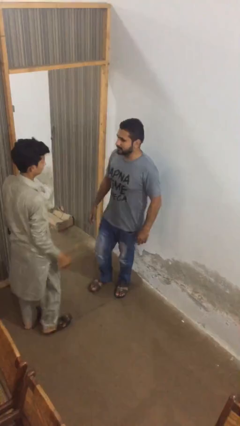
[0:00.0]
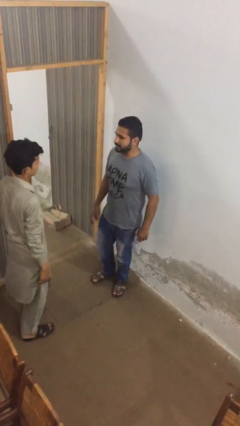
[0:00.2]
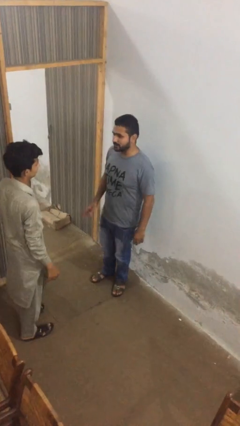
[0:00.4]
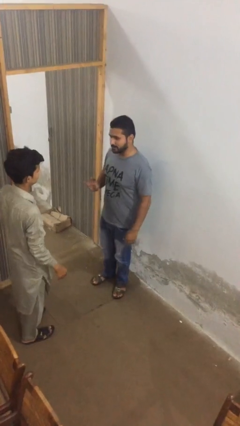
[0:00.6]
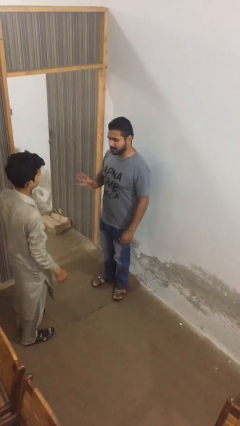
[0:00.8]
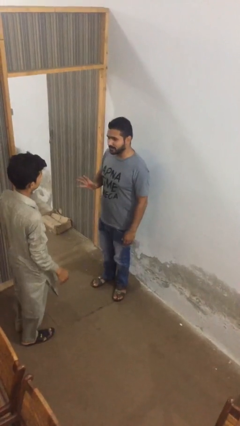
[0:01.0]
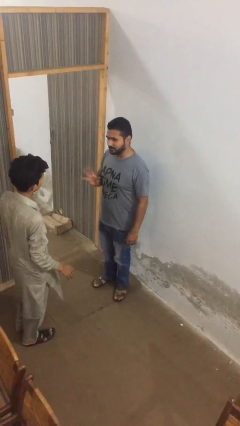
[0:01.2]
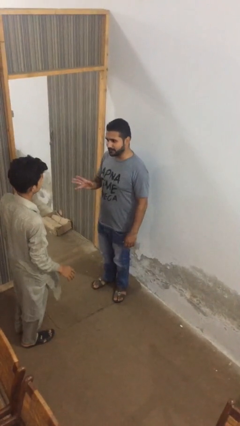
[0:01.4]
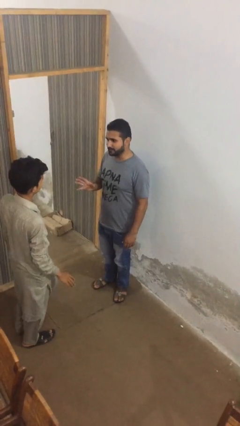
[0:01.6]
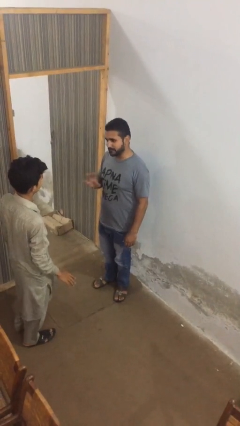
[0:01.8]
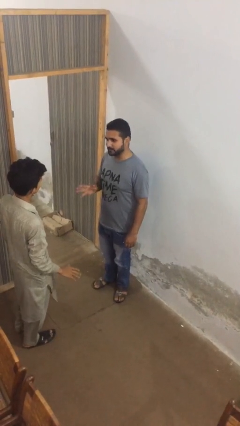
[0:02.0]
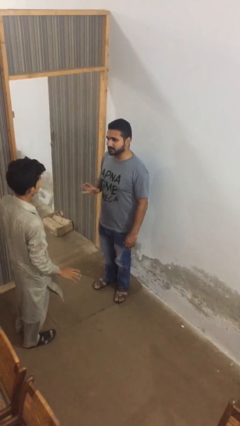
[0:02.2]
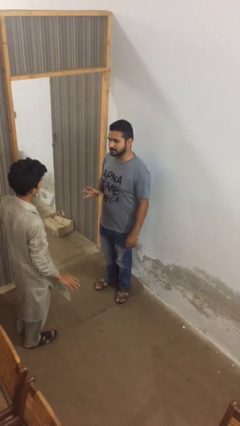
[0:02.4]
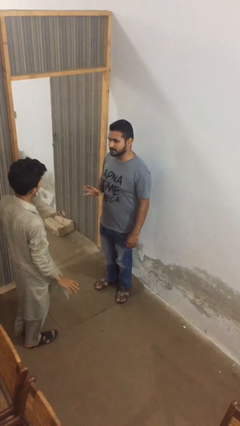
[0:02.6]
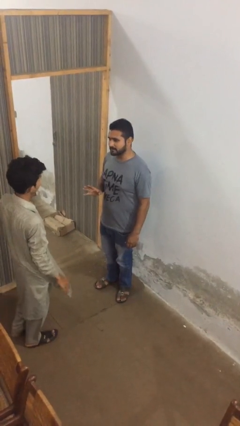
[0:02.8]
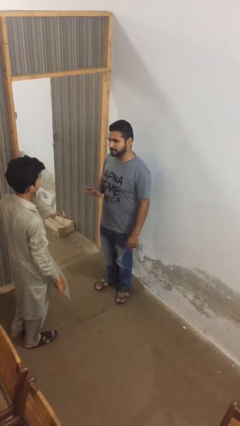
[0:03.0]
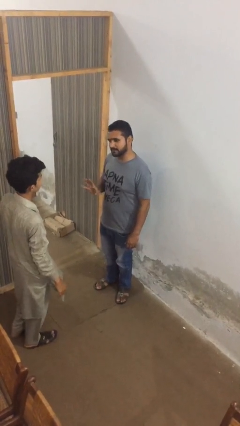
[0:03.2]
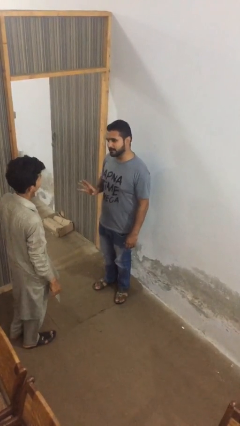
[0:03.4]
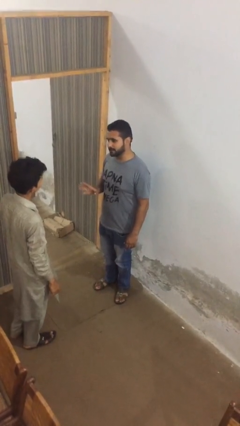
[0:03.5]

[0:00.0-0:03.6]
person talks to person

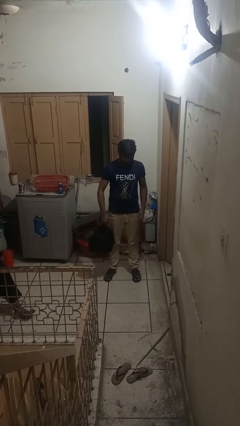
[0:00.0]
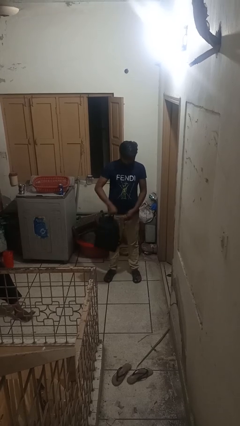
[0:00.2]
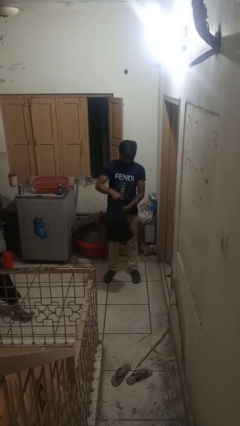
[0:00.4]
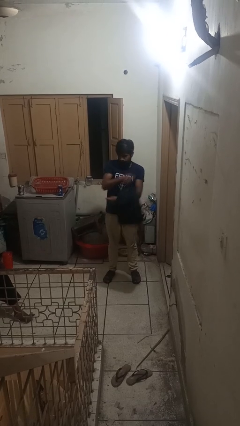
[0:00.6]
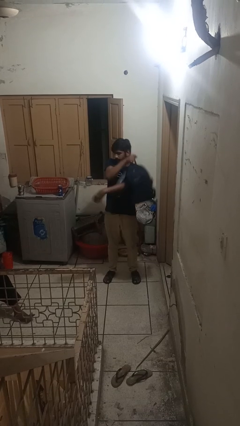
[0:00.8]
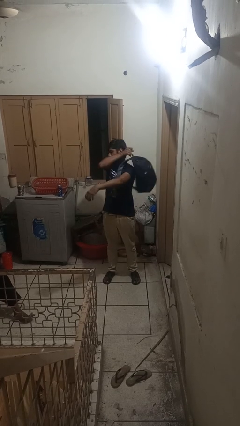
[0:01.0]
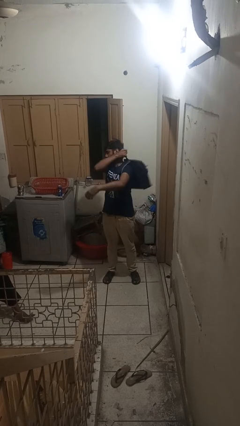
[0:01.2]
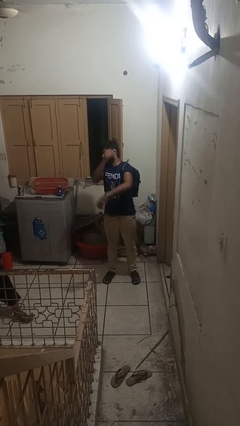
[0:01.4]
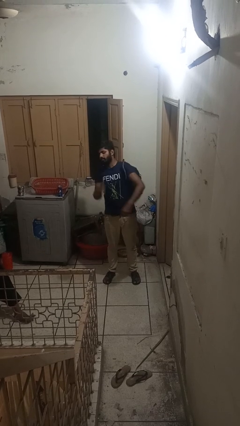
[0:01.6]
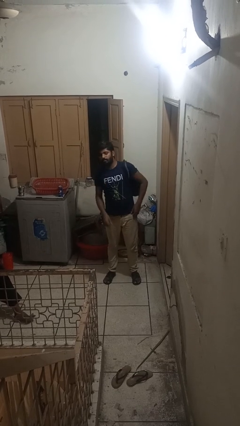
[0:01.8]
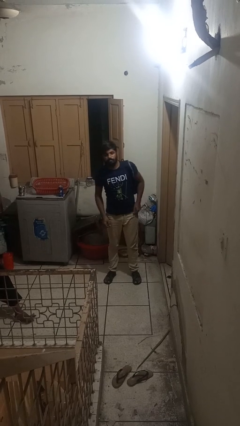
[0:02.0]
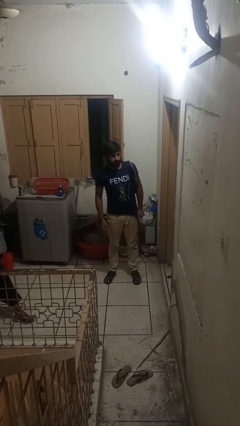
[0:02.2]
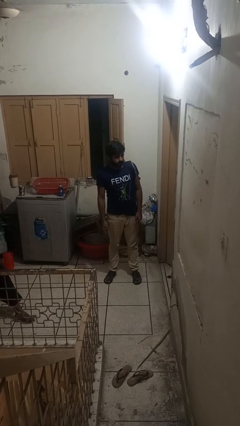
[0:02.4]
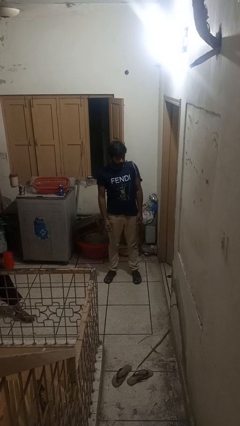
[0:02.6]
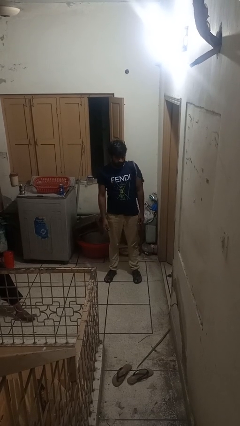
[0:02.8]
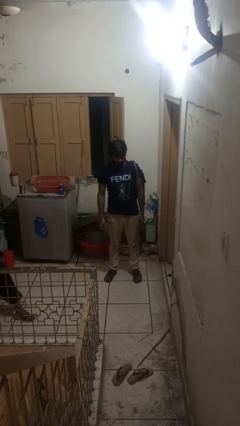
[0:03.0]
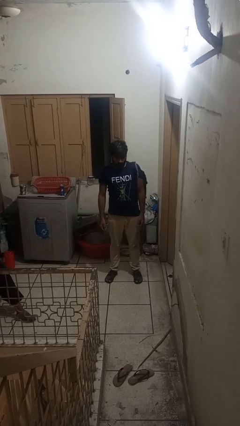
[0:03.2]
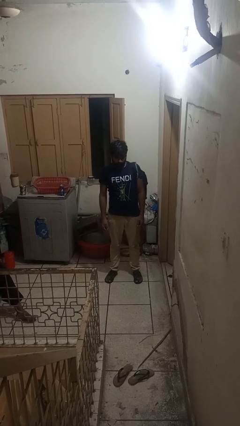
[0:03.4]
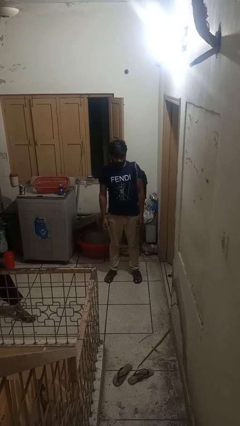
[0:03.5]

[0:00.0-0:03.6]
person puts on backpack

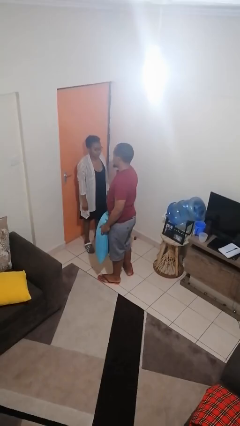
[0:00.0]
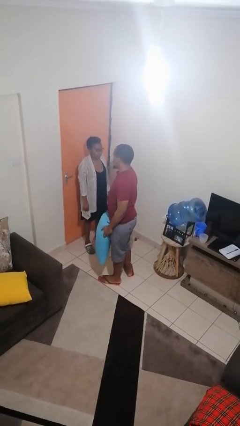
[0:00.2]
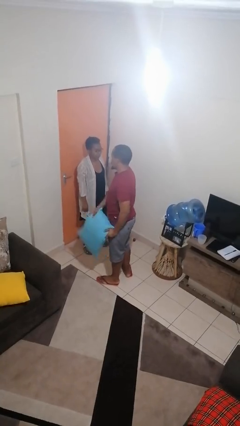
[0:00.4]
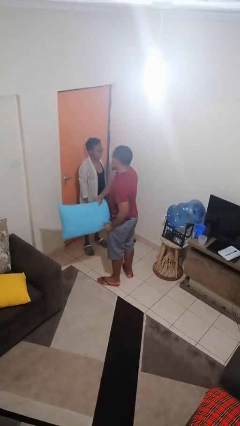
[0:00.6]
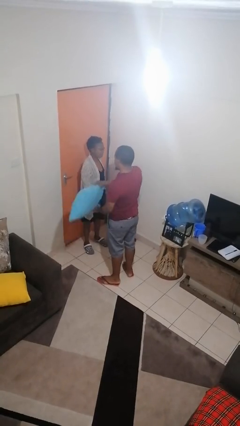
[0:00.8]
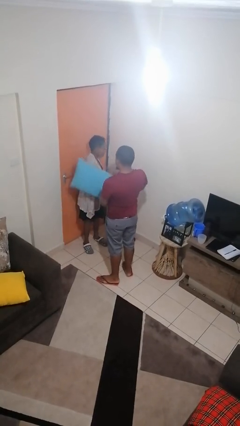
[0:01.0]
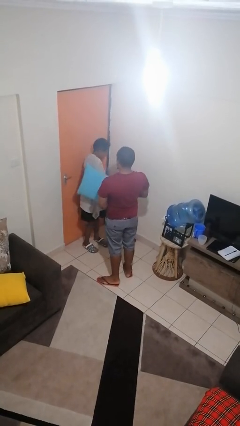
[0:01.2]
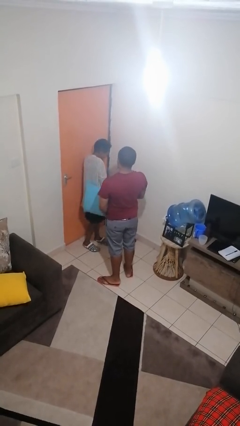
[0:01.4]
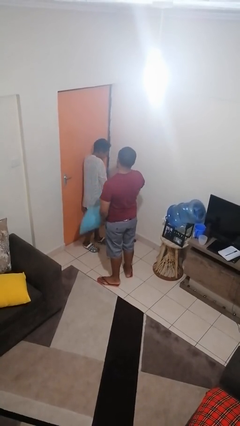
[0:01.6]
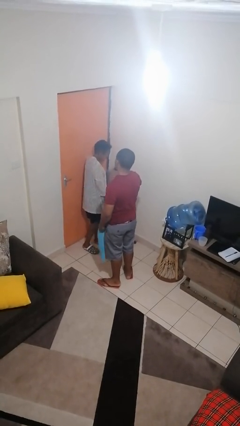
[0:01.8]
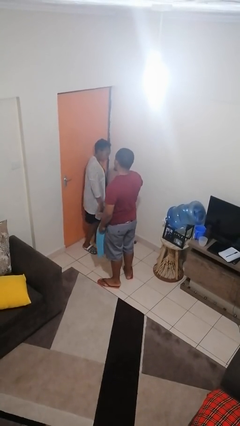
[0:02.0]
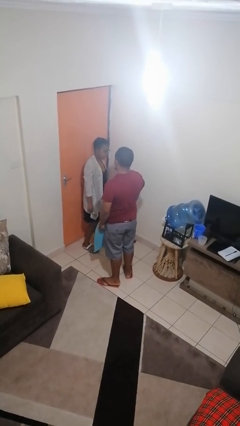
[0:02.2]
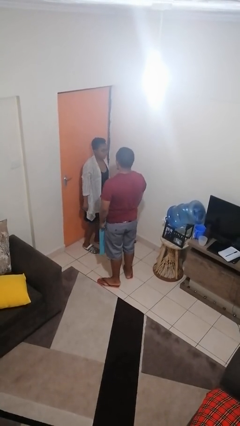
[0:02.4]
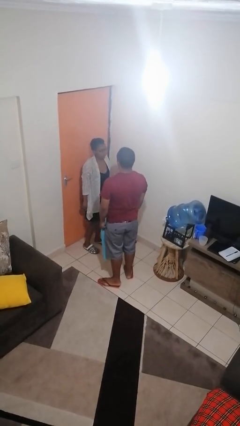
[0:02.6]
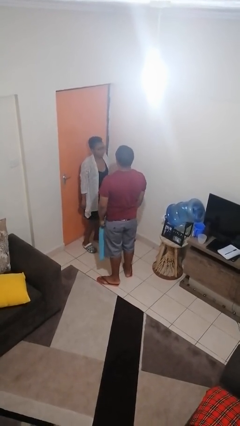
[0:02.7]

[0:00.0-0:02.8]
person hits person with pillow

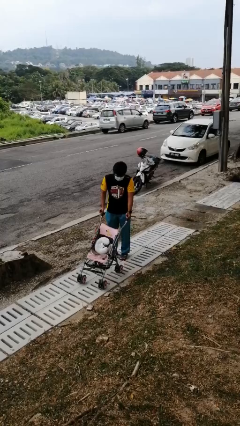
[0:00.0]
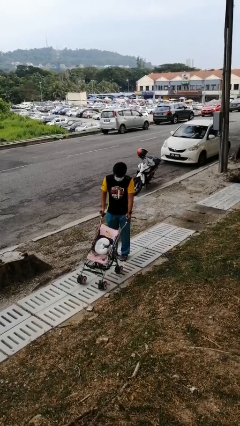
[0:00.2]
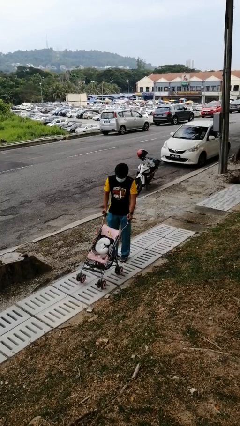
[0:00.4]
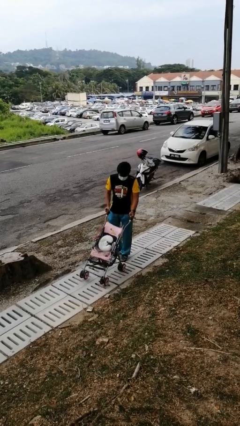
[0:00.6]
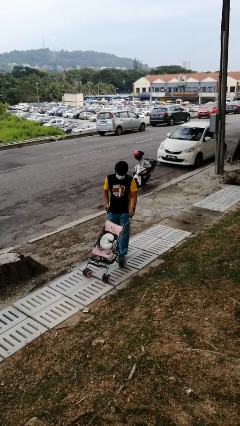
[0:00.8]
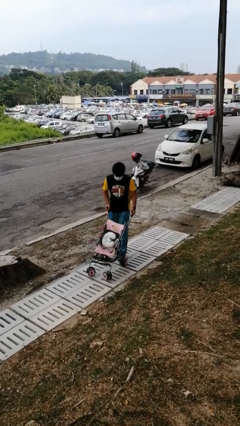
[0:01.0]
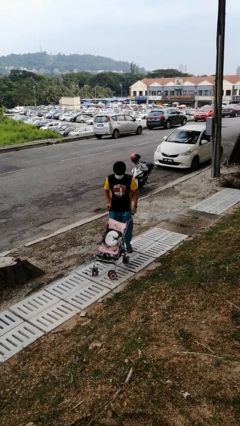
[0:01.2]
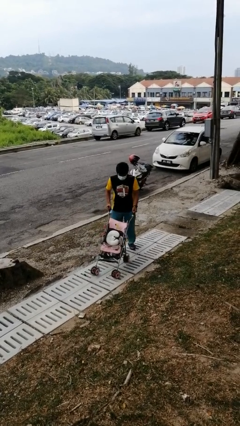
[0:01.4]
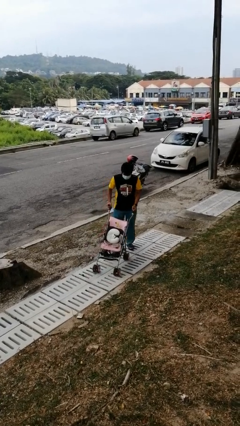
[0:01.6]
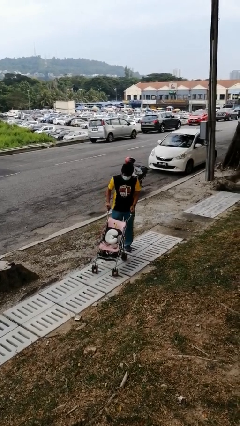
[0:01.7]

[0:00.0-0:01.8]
person pulls wheeled cart

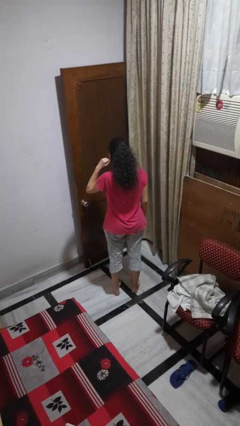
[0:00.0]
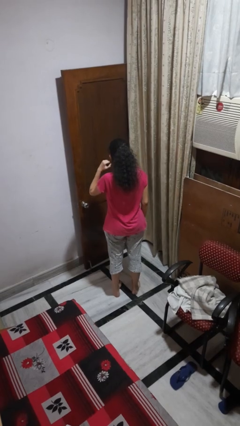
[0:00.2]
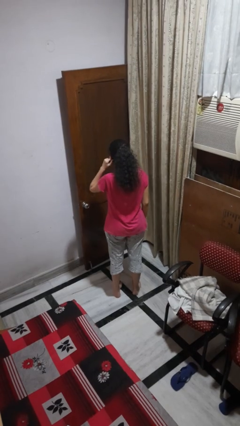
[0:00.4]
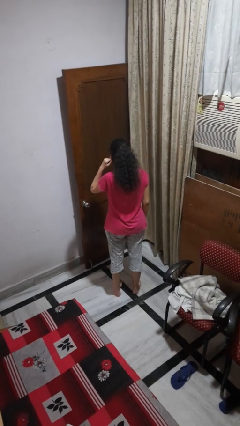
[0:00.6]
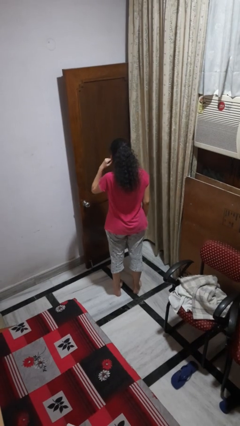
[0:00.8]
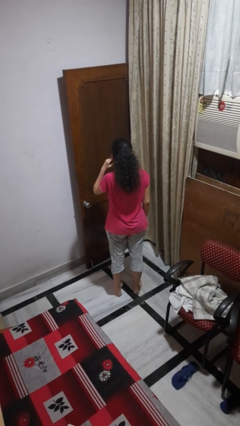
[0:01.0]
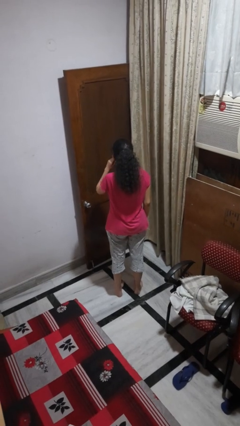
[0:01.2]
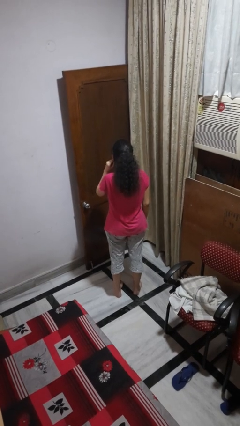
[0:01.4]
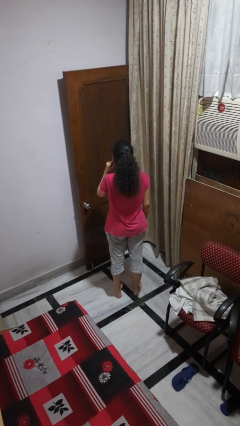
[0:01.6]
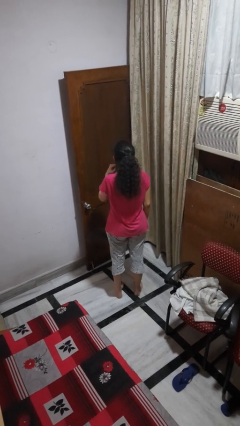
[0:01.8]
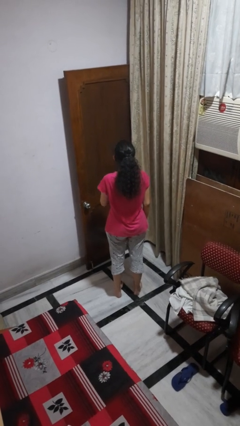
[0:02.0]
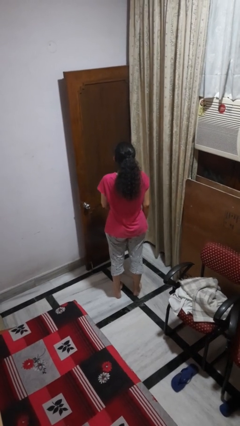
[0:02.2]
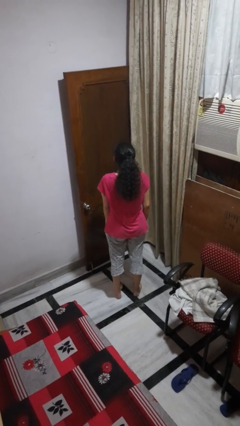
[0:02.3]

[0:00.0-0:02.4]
person touches earlobe

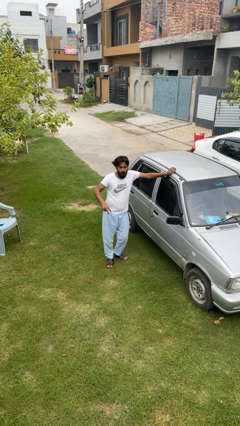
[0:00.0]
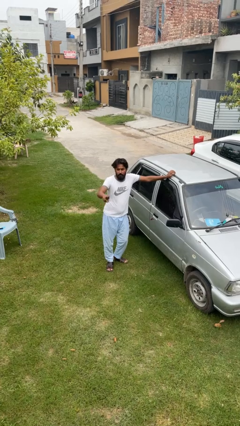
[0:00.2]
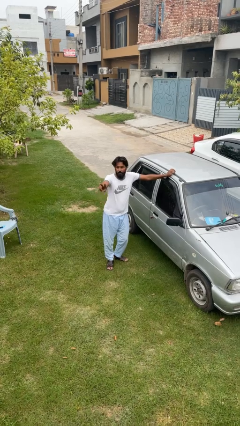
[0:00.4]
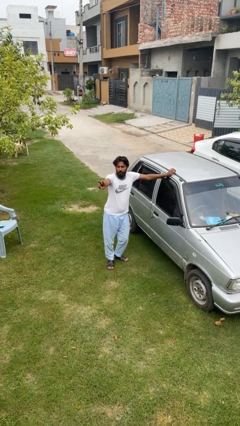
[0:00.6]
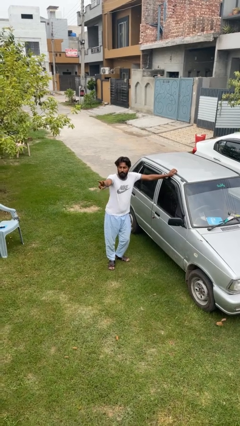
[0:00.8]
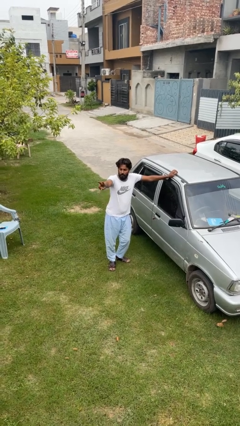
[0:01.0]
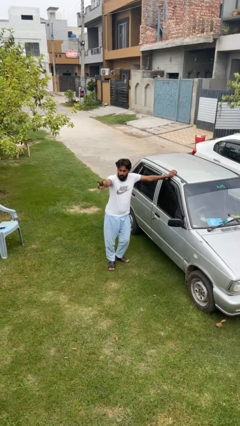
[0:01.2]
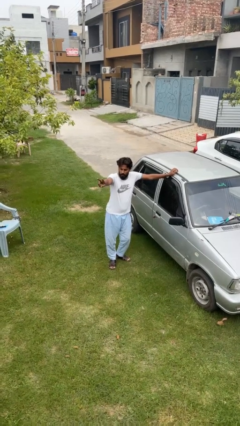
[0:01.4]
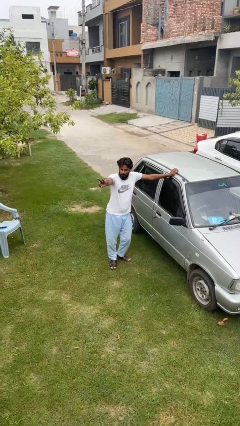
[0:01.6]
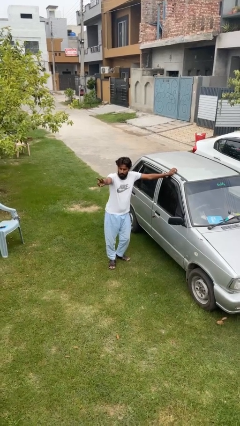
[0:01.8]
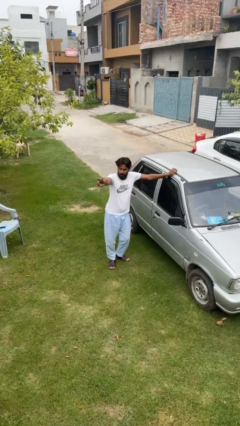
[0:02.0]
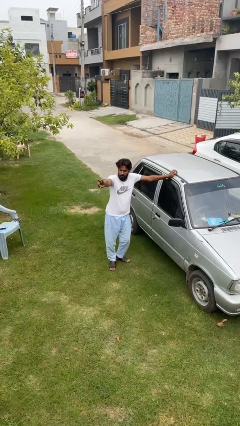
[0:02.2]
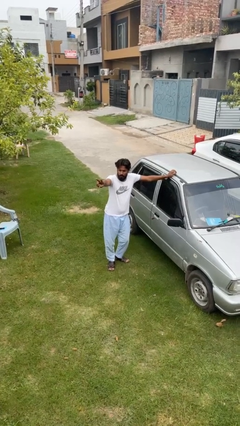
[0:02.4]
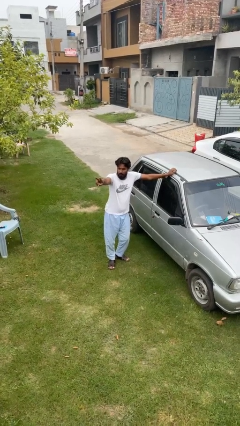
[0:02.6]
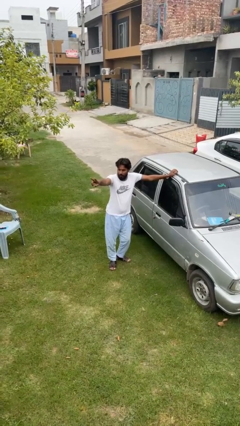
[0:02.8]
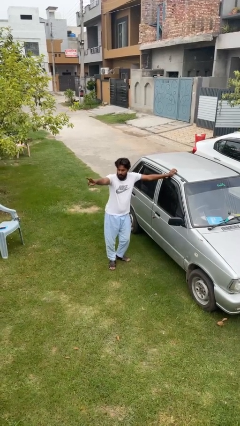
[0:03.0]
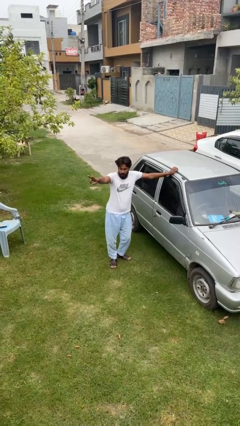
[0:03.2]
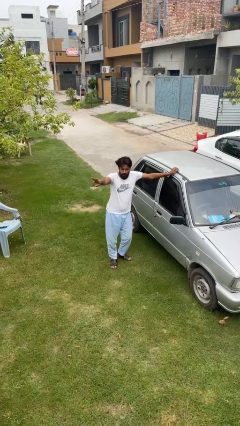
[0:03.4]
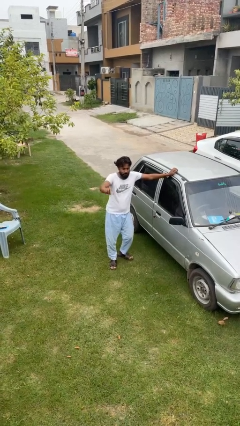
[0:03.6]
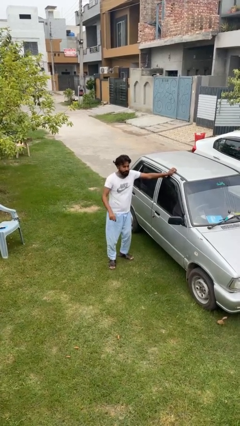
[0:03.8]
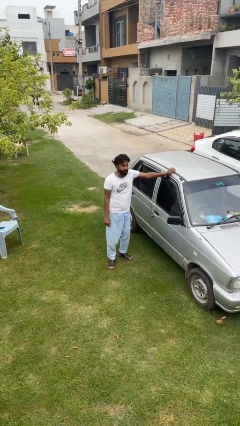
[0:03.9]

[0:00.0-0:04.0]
person gestures peace
